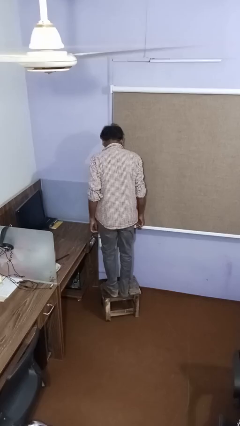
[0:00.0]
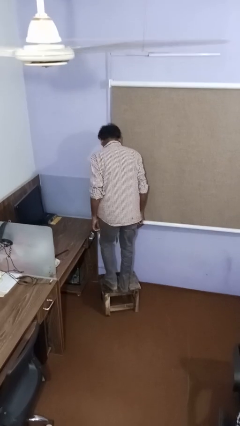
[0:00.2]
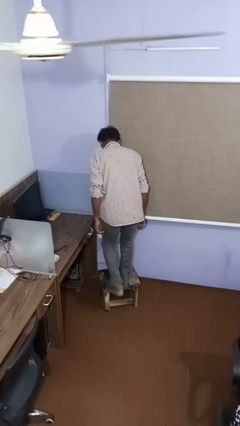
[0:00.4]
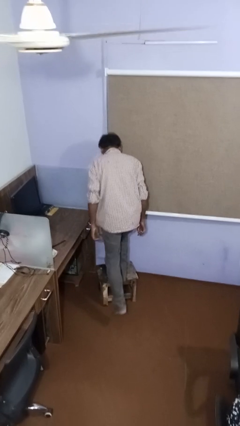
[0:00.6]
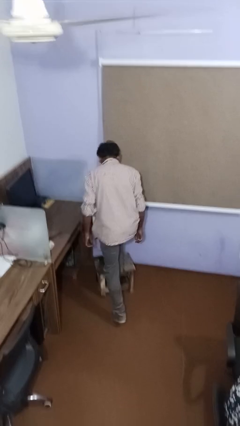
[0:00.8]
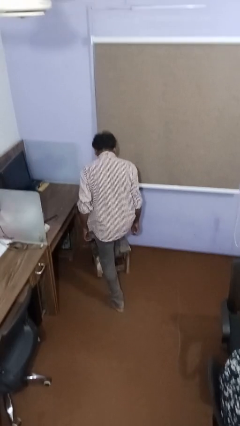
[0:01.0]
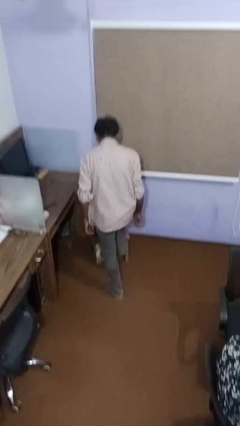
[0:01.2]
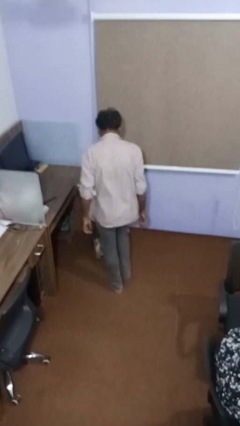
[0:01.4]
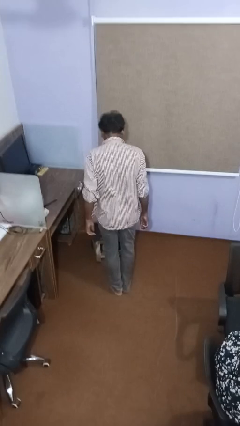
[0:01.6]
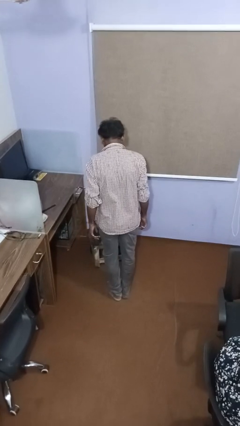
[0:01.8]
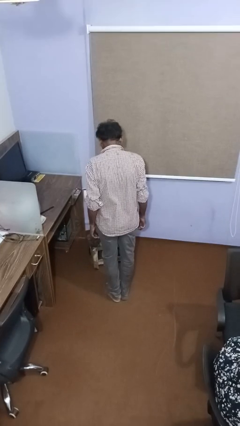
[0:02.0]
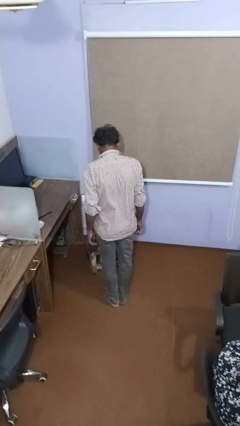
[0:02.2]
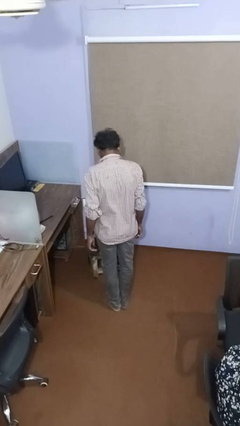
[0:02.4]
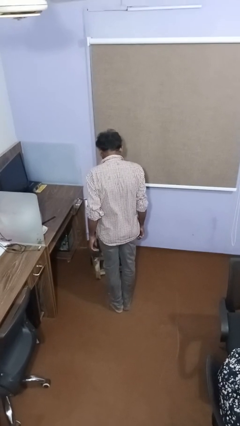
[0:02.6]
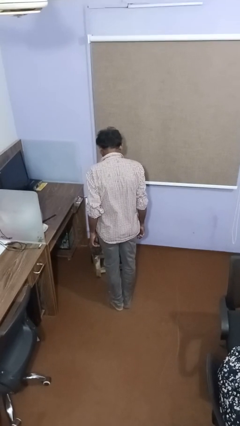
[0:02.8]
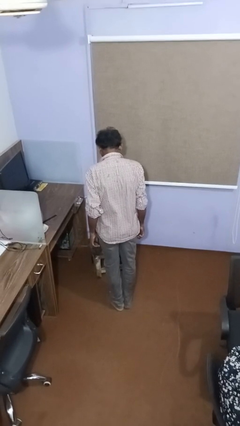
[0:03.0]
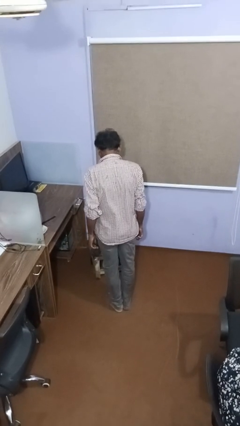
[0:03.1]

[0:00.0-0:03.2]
person climbs off table

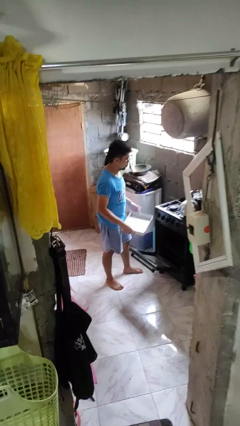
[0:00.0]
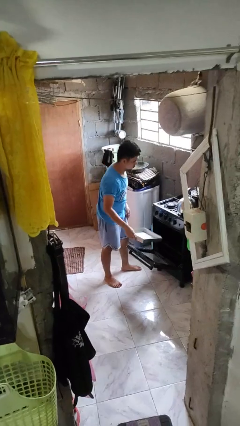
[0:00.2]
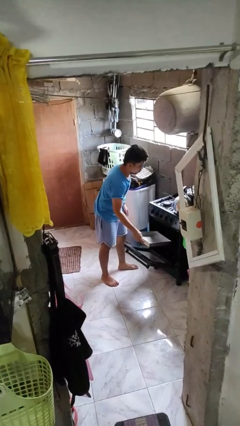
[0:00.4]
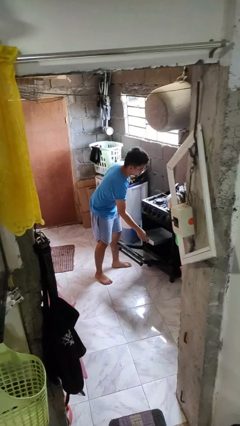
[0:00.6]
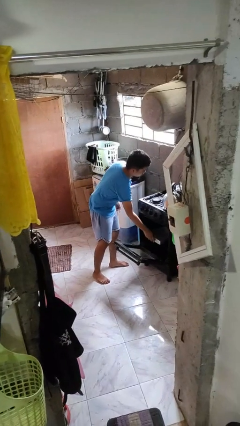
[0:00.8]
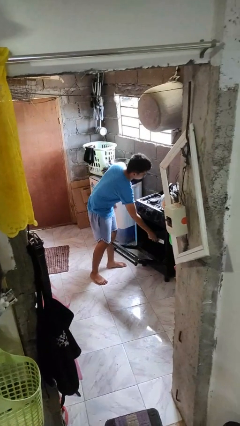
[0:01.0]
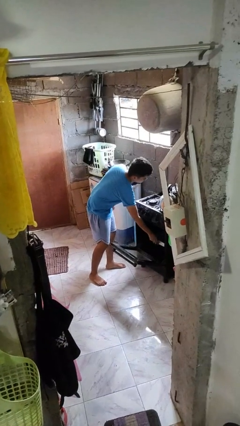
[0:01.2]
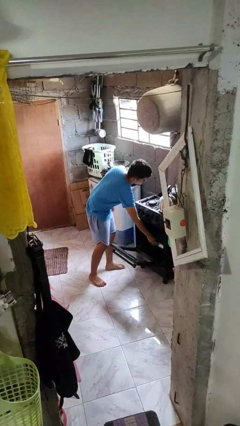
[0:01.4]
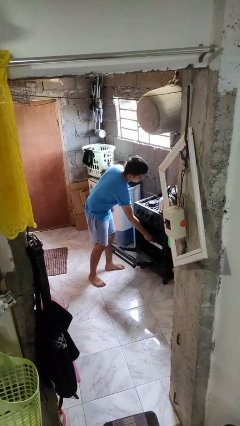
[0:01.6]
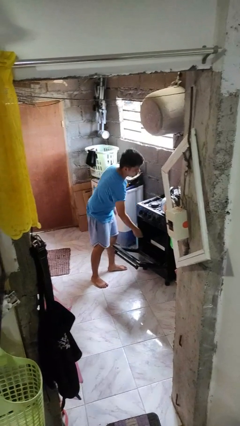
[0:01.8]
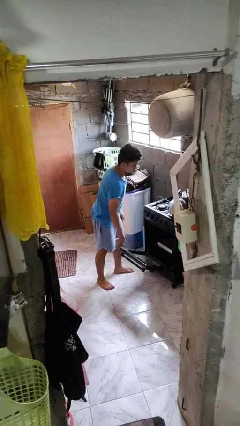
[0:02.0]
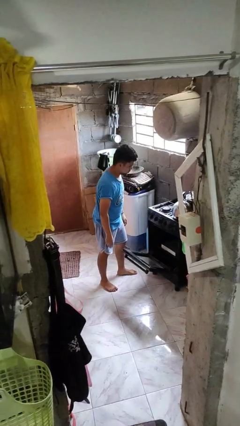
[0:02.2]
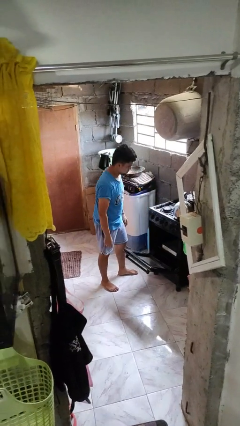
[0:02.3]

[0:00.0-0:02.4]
person puts object into oven

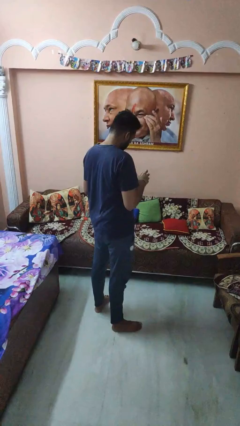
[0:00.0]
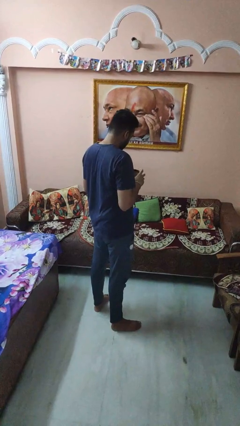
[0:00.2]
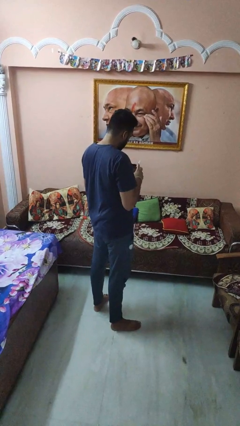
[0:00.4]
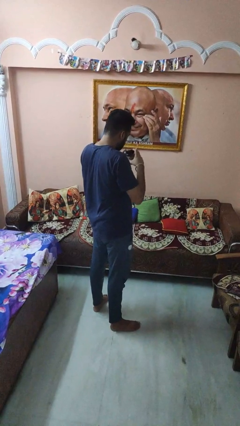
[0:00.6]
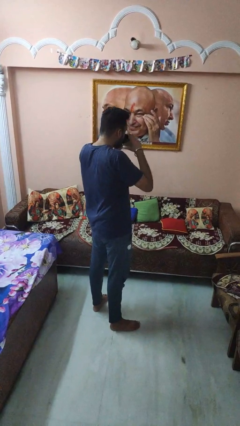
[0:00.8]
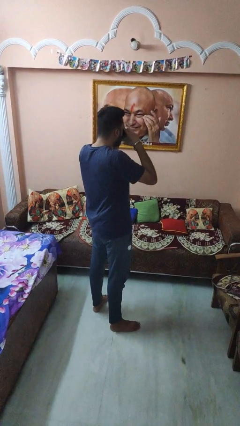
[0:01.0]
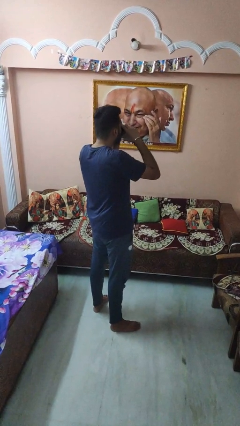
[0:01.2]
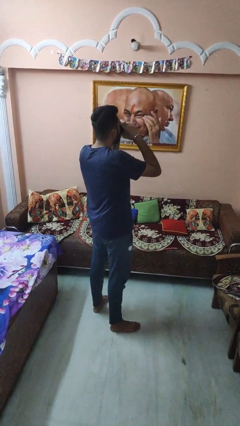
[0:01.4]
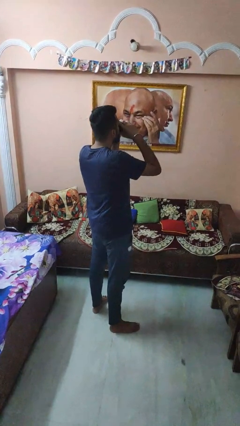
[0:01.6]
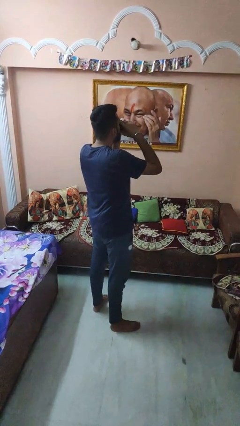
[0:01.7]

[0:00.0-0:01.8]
person drinks from mug

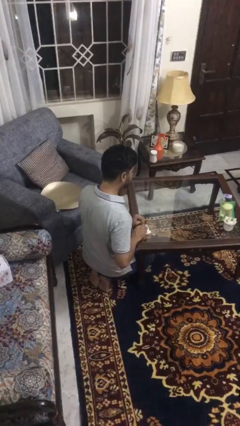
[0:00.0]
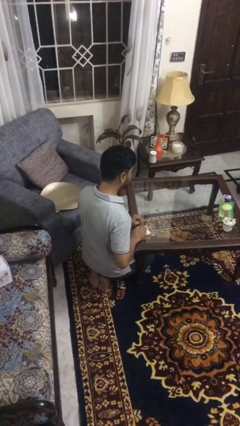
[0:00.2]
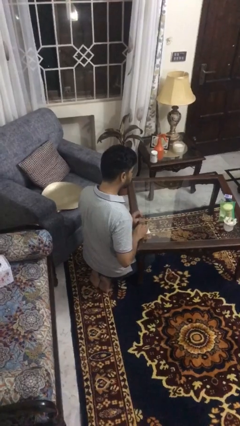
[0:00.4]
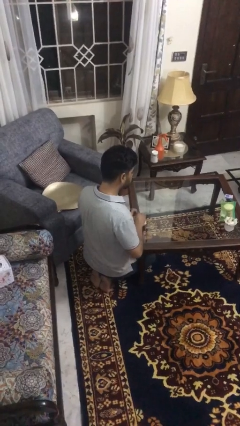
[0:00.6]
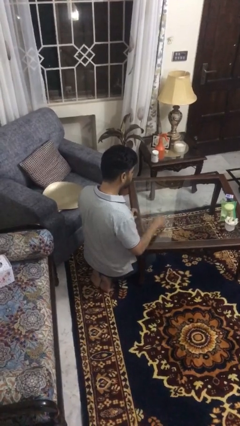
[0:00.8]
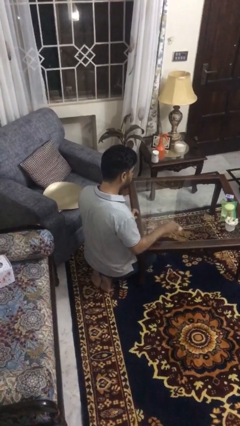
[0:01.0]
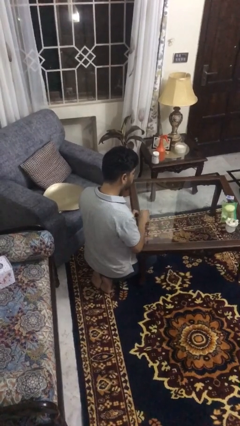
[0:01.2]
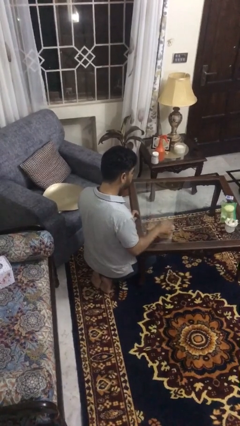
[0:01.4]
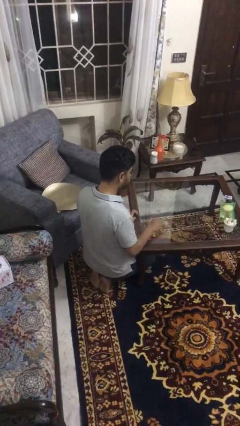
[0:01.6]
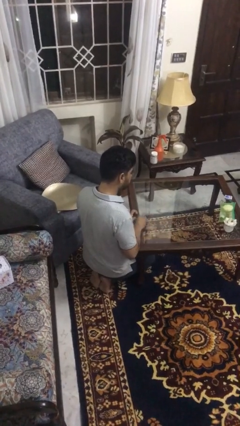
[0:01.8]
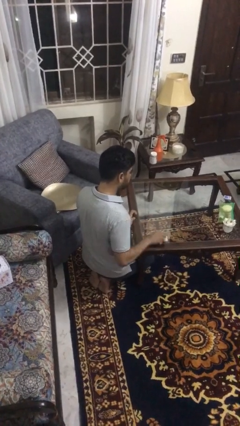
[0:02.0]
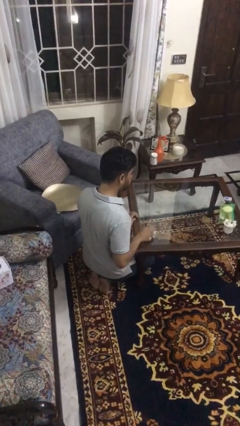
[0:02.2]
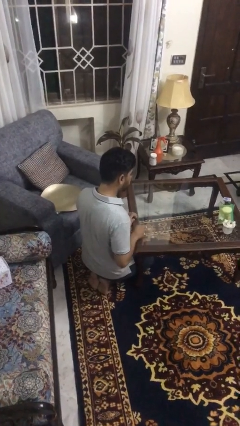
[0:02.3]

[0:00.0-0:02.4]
person cleans table with rag

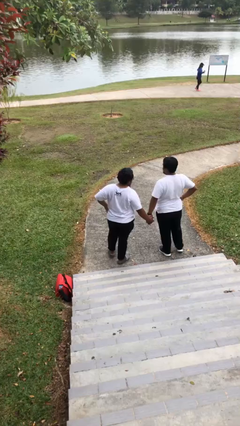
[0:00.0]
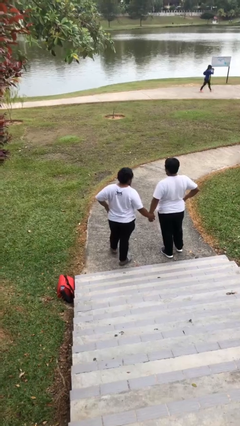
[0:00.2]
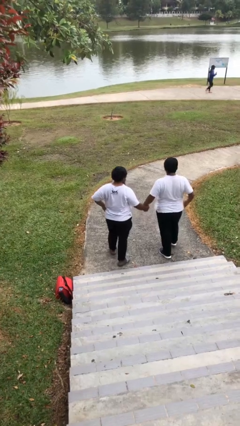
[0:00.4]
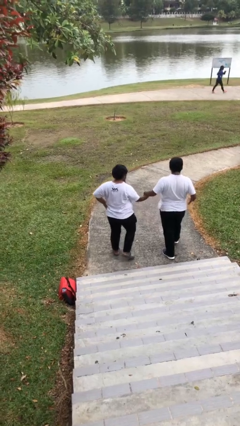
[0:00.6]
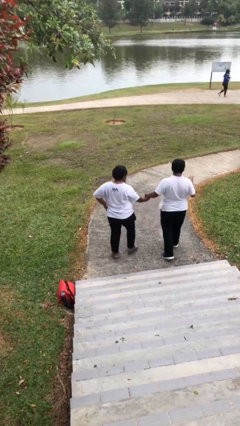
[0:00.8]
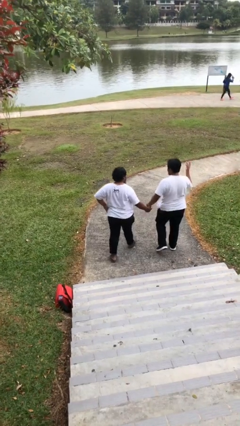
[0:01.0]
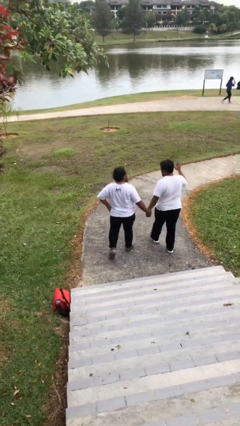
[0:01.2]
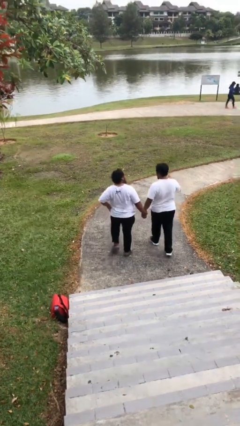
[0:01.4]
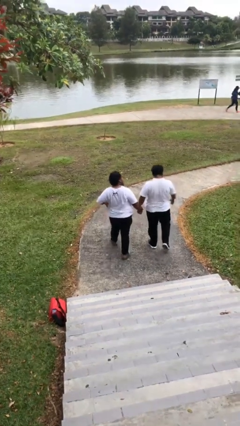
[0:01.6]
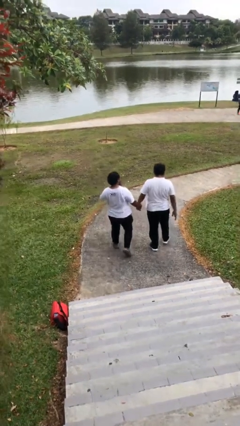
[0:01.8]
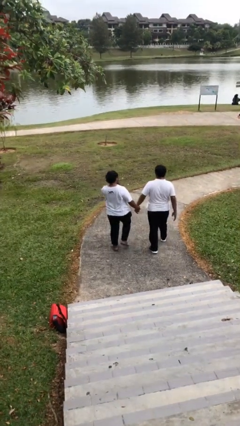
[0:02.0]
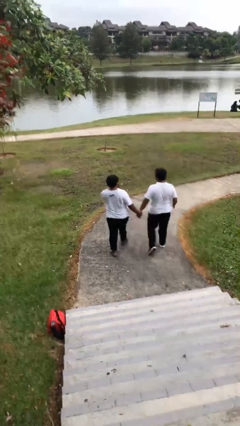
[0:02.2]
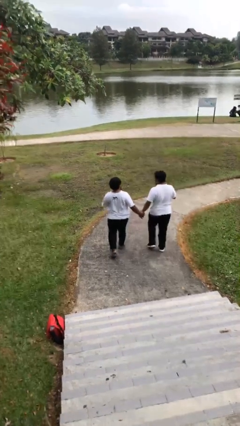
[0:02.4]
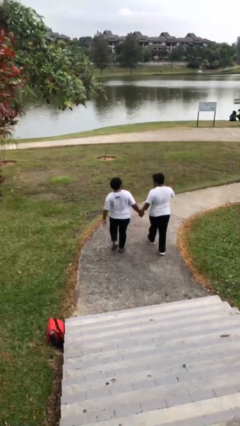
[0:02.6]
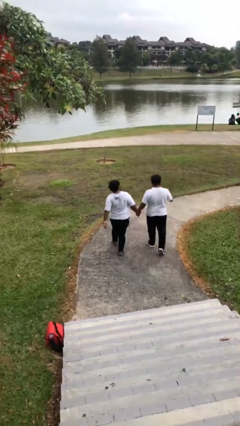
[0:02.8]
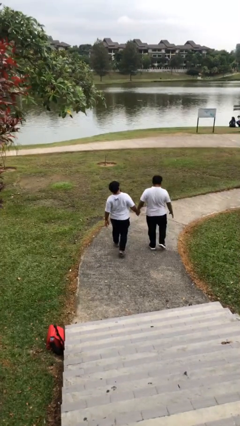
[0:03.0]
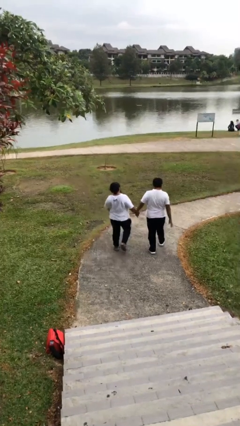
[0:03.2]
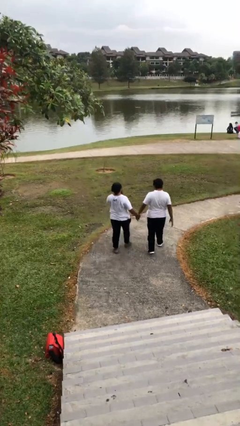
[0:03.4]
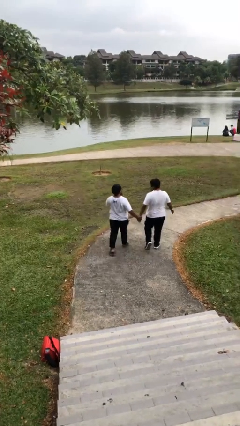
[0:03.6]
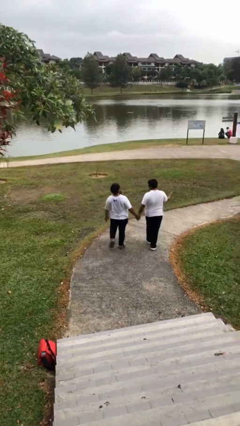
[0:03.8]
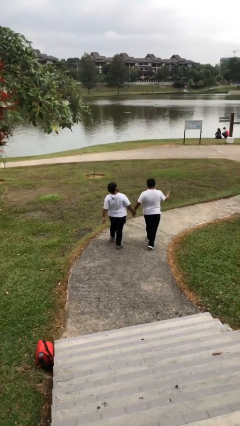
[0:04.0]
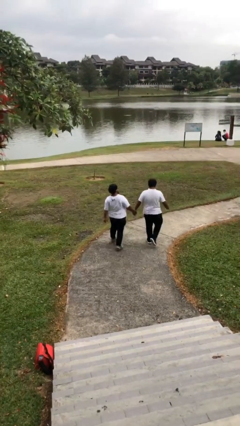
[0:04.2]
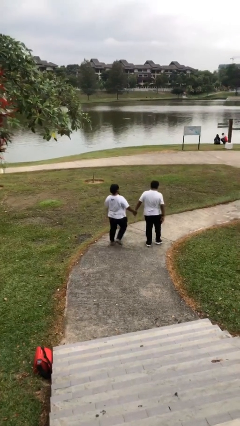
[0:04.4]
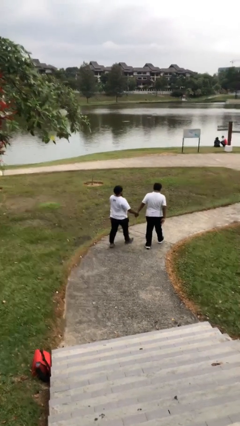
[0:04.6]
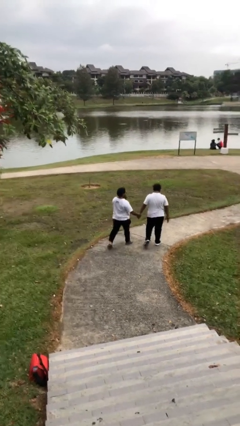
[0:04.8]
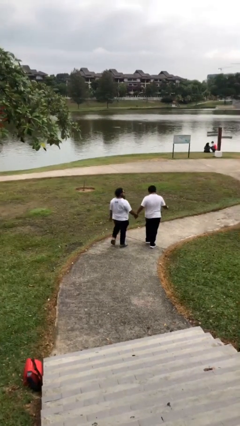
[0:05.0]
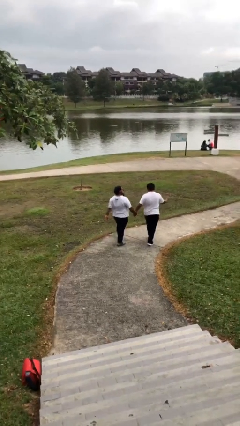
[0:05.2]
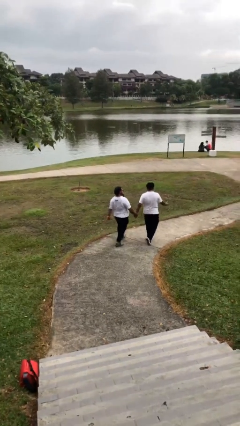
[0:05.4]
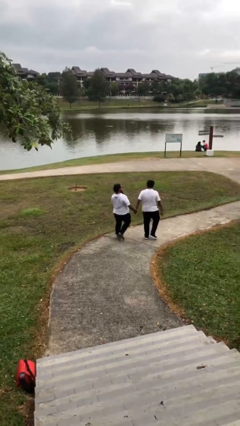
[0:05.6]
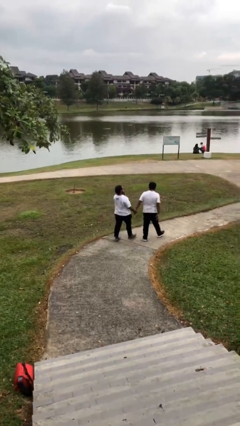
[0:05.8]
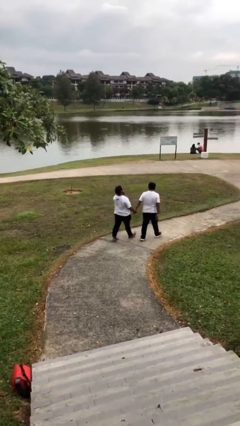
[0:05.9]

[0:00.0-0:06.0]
person holds hand

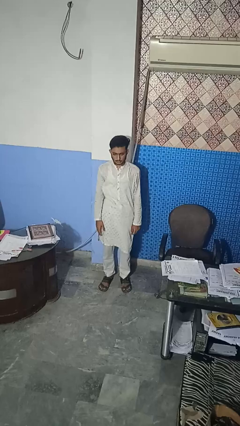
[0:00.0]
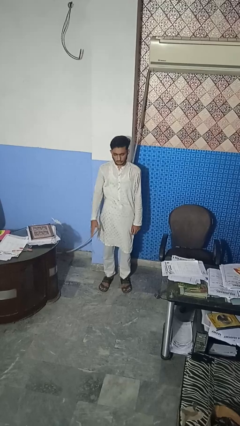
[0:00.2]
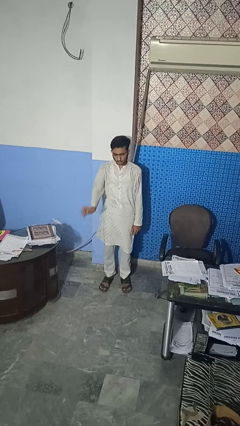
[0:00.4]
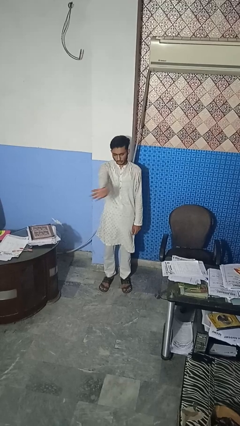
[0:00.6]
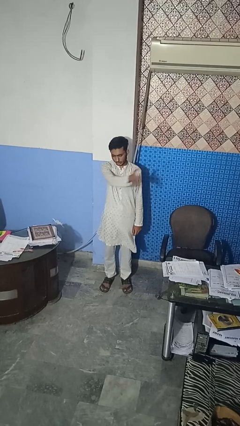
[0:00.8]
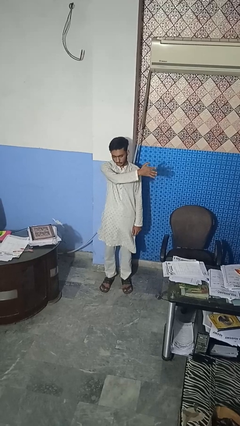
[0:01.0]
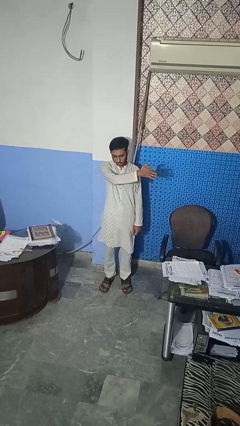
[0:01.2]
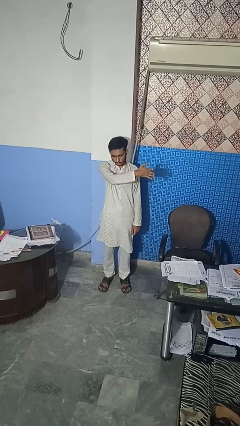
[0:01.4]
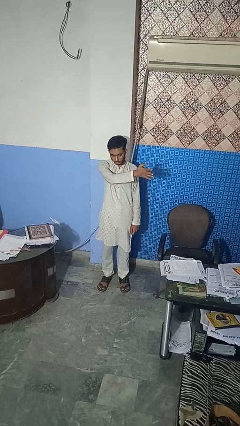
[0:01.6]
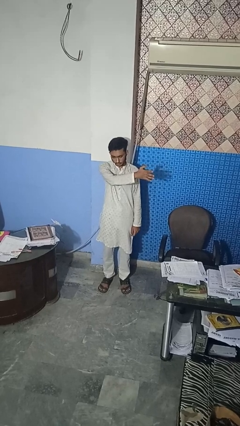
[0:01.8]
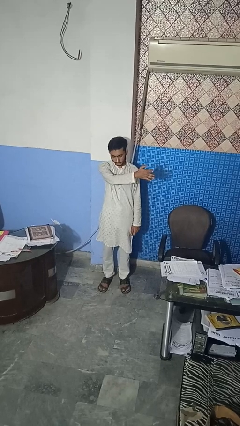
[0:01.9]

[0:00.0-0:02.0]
person gestures swipe left
